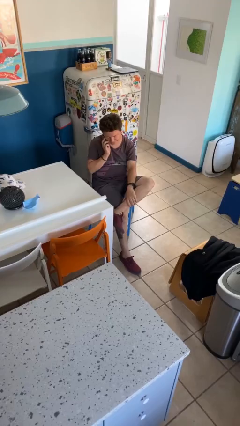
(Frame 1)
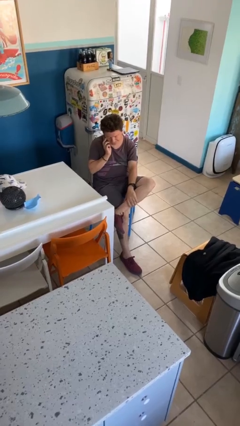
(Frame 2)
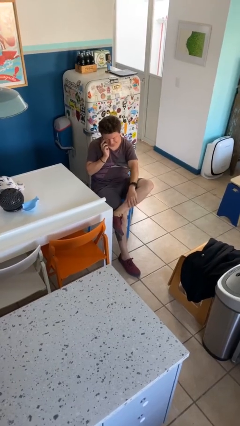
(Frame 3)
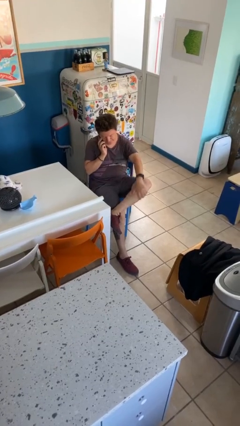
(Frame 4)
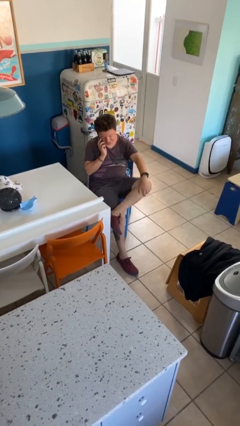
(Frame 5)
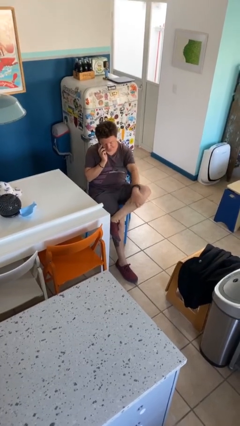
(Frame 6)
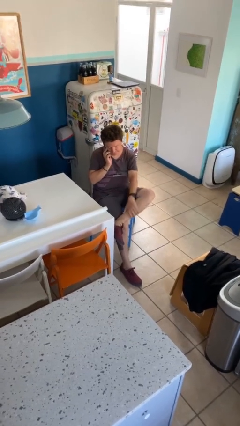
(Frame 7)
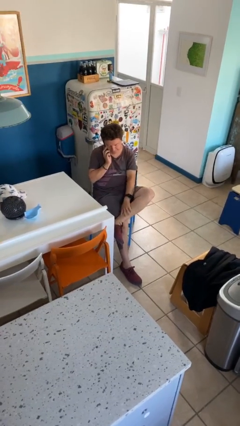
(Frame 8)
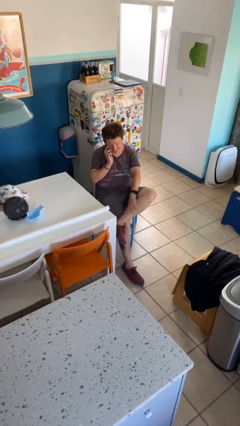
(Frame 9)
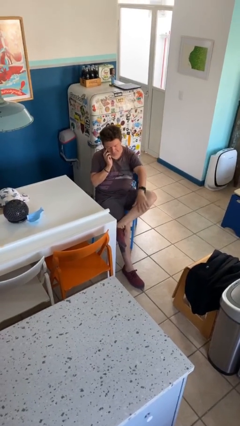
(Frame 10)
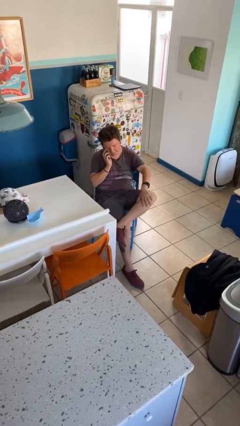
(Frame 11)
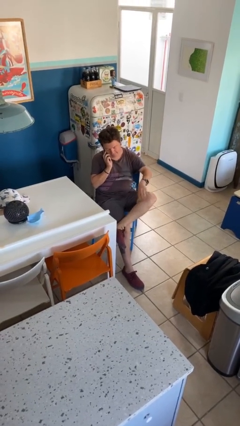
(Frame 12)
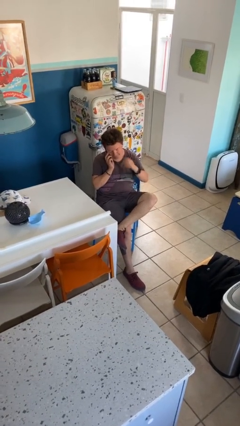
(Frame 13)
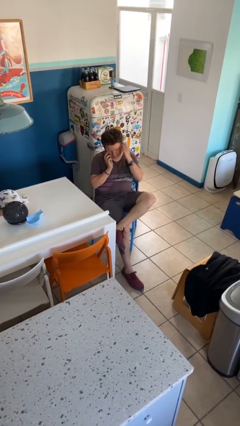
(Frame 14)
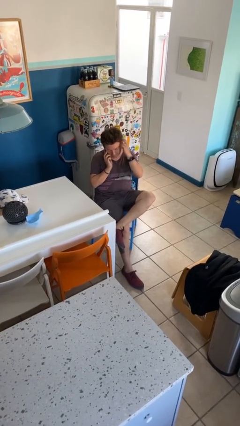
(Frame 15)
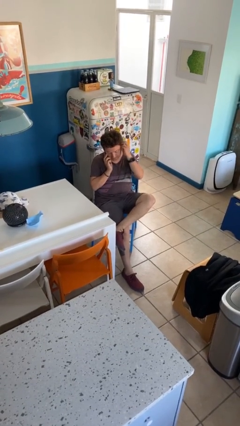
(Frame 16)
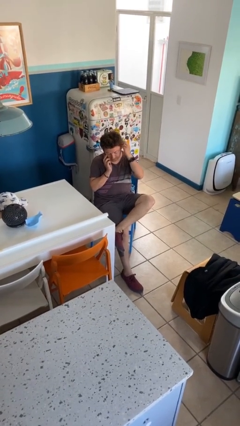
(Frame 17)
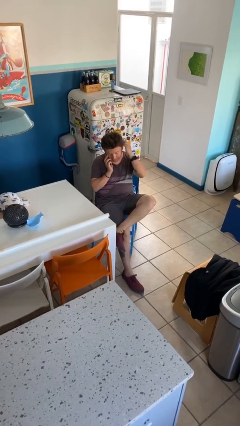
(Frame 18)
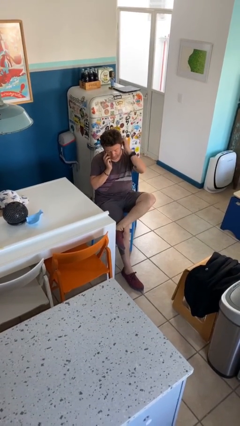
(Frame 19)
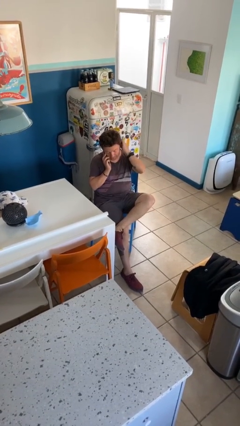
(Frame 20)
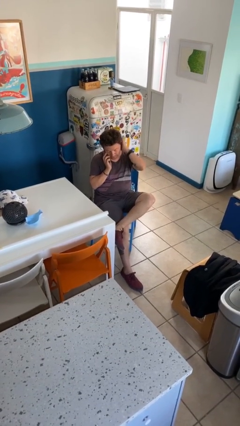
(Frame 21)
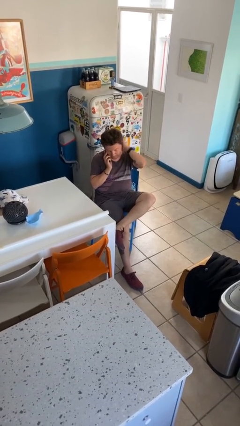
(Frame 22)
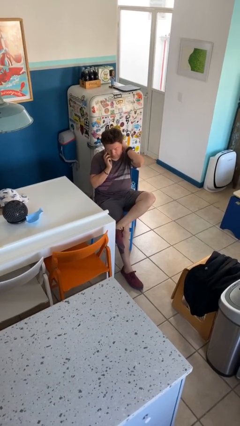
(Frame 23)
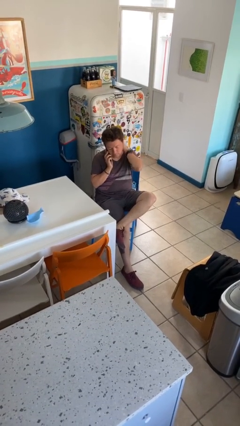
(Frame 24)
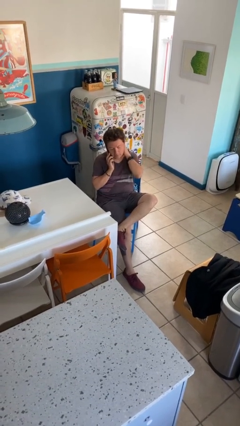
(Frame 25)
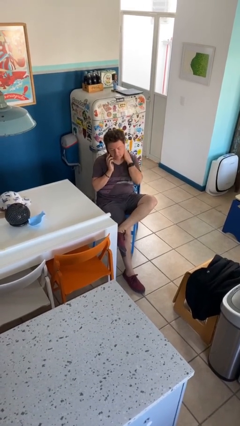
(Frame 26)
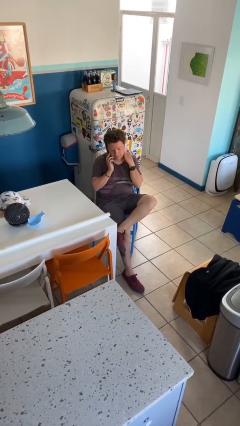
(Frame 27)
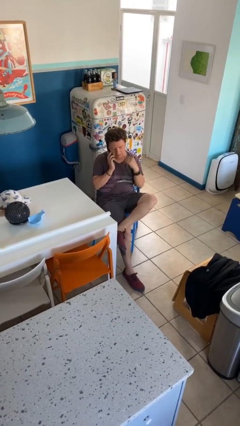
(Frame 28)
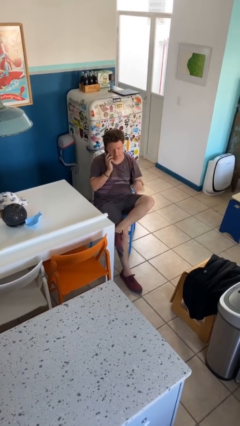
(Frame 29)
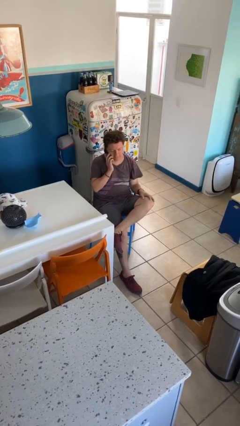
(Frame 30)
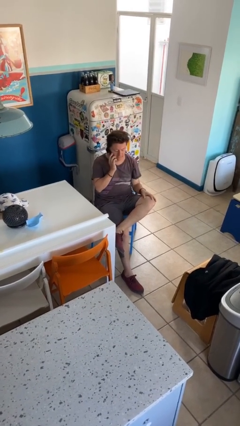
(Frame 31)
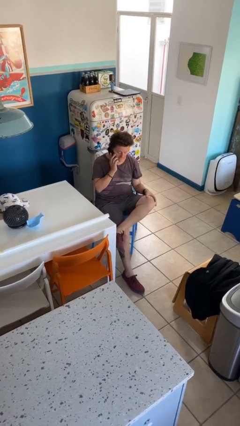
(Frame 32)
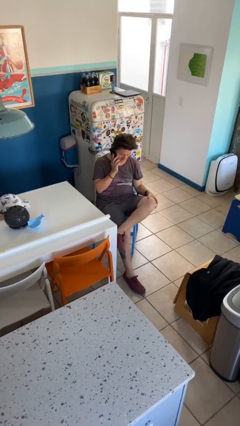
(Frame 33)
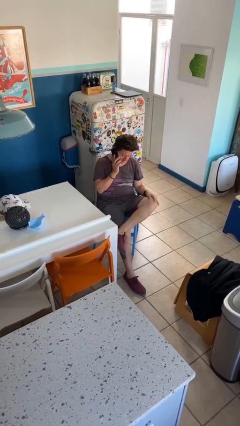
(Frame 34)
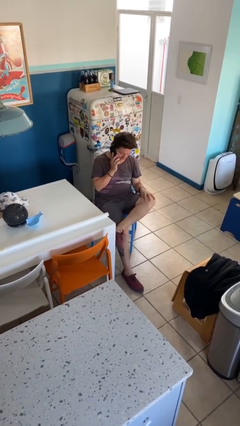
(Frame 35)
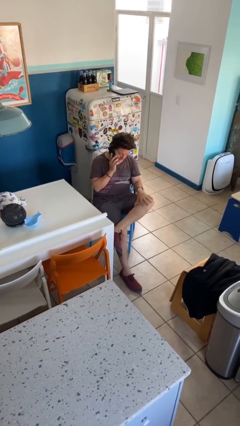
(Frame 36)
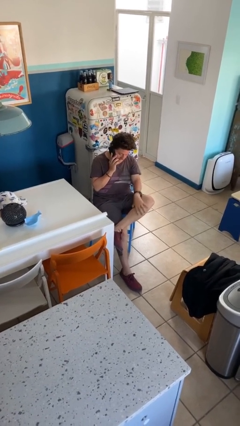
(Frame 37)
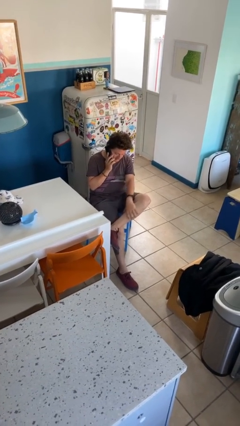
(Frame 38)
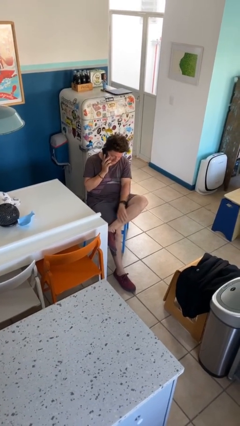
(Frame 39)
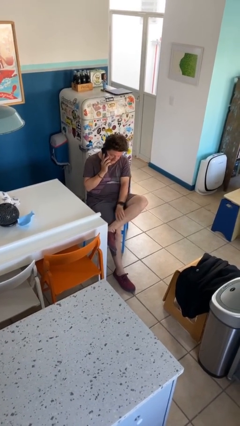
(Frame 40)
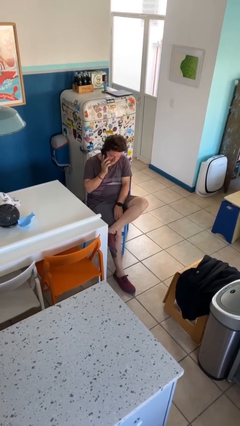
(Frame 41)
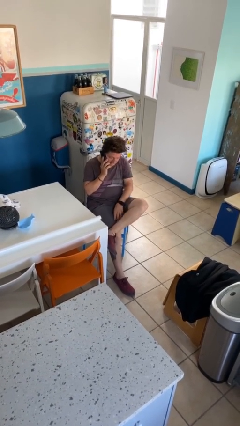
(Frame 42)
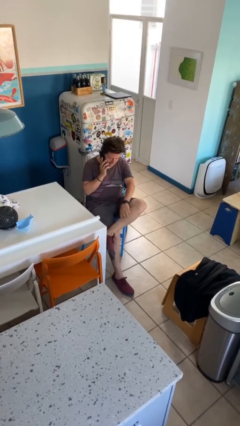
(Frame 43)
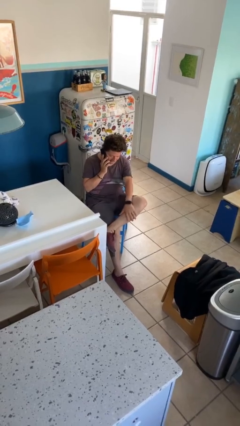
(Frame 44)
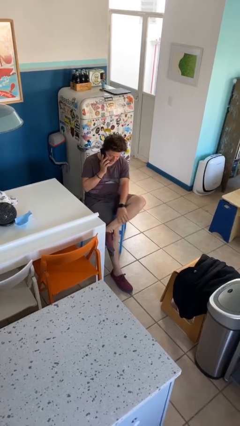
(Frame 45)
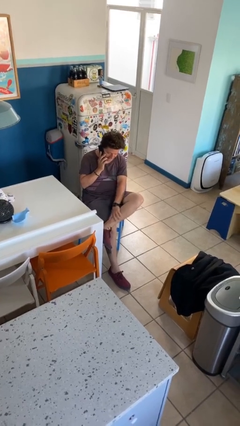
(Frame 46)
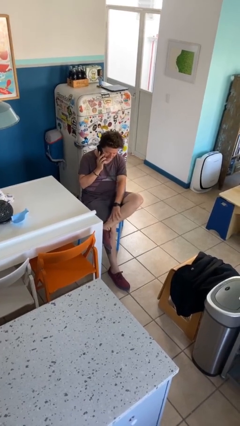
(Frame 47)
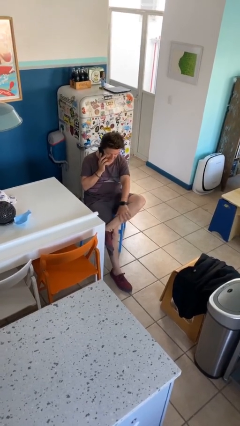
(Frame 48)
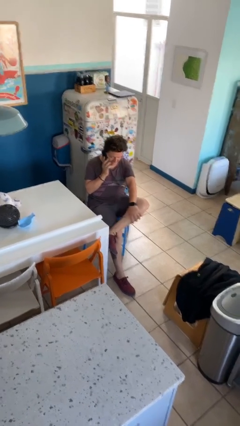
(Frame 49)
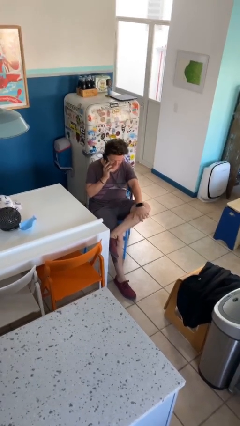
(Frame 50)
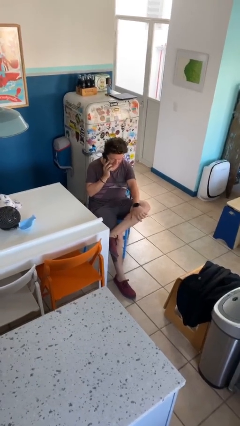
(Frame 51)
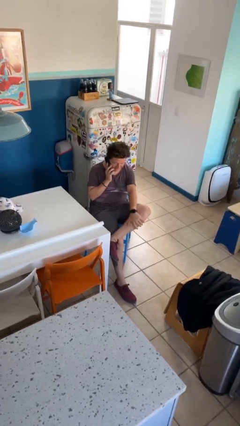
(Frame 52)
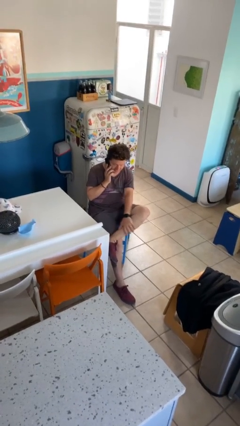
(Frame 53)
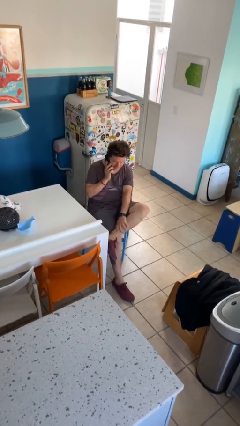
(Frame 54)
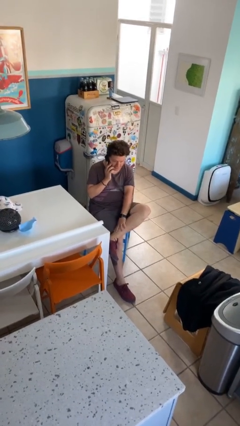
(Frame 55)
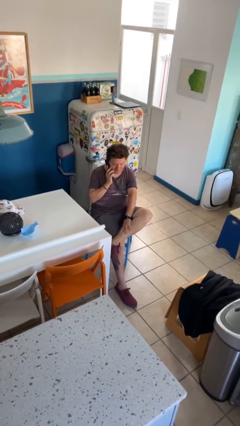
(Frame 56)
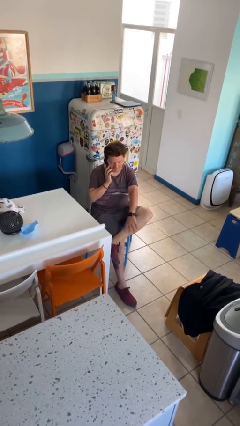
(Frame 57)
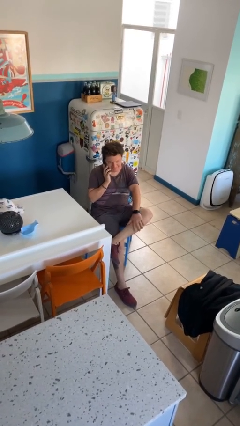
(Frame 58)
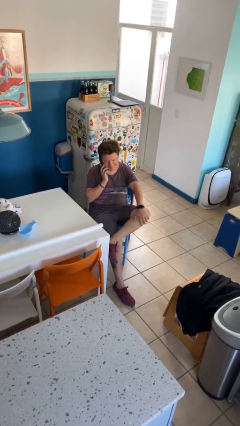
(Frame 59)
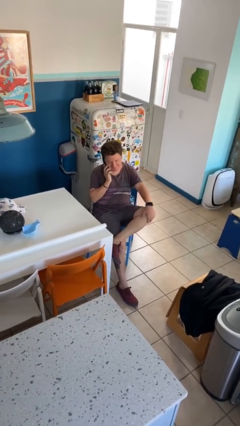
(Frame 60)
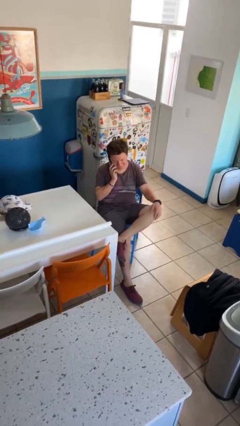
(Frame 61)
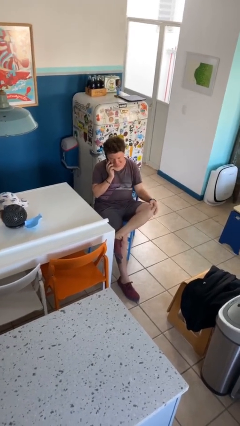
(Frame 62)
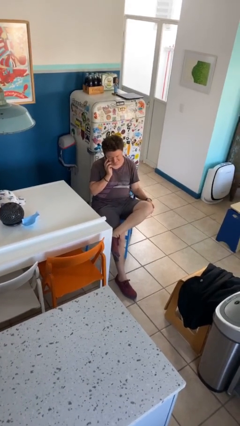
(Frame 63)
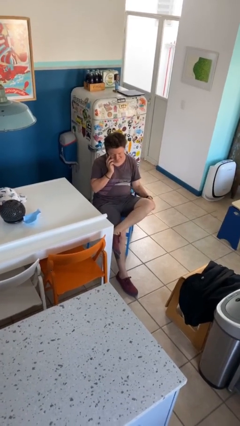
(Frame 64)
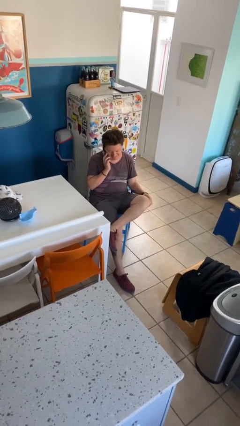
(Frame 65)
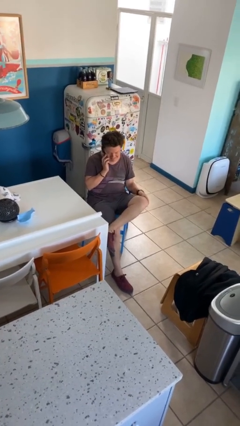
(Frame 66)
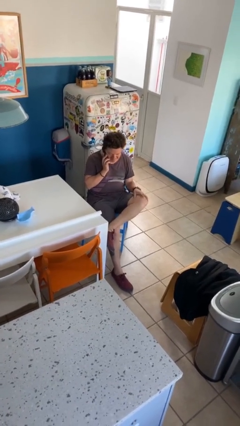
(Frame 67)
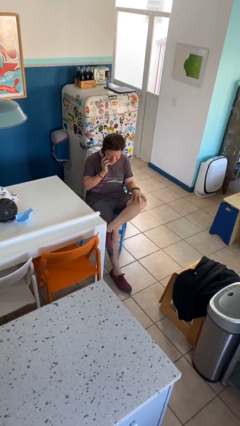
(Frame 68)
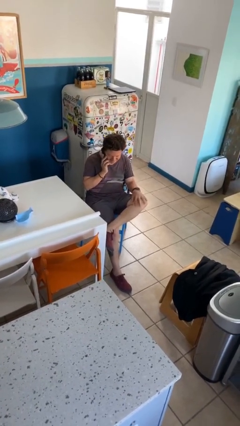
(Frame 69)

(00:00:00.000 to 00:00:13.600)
person talks on phone

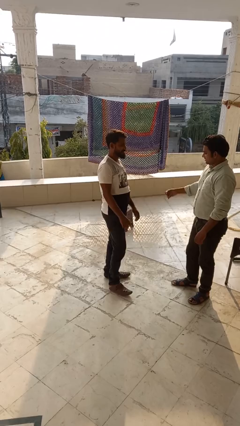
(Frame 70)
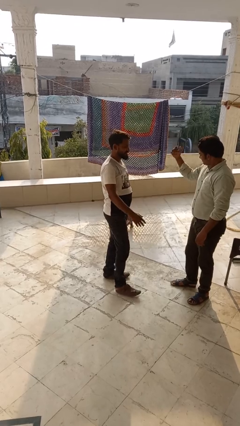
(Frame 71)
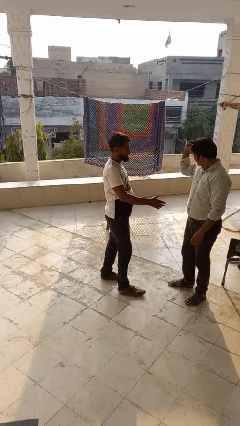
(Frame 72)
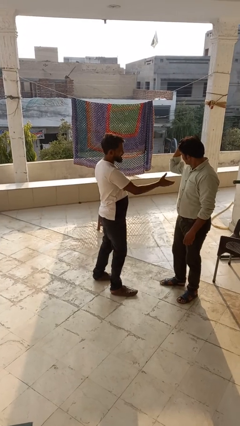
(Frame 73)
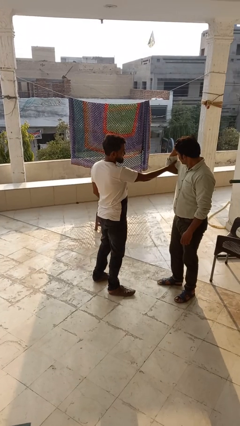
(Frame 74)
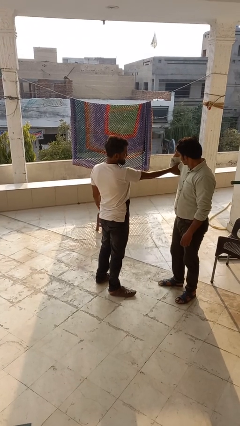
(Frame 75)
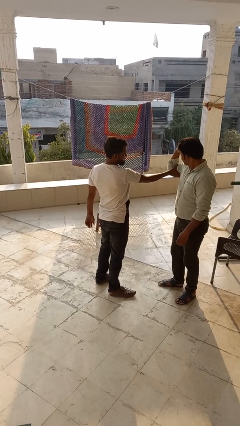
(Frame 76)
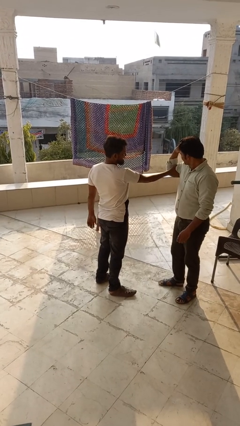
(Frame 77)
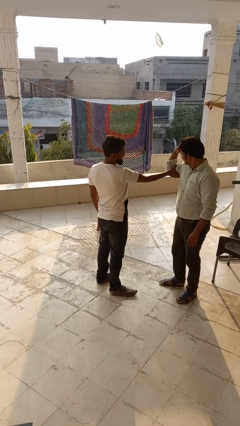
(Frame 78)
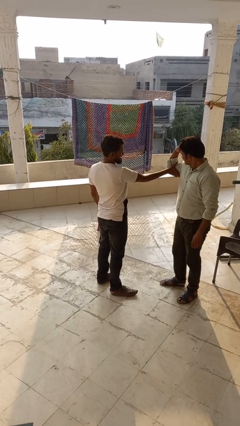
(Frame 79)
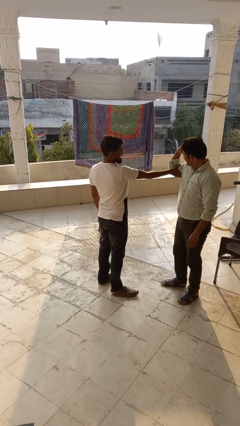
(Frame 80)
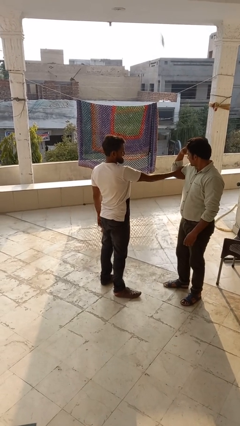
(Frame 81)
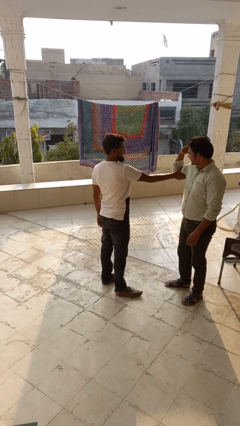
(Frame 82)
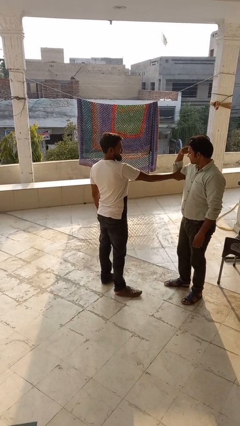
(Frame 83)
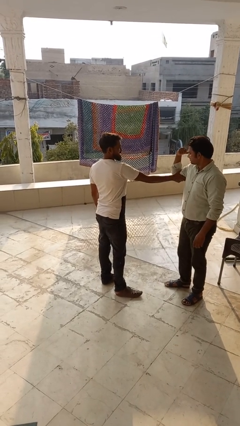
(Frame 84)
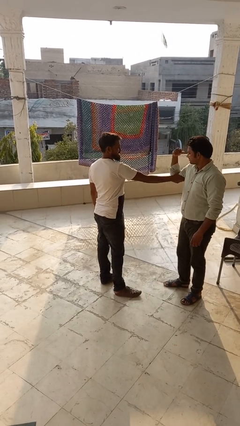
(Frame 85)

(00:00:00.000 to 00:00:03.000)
person grabs person by bicep

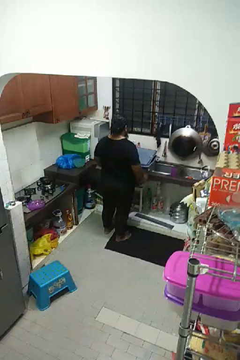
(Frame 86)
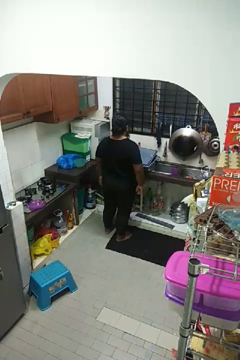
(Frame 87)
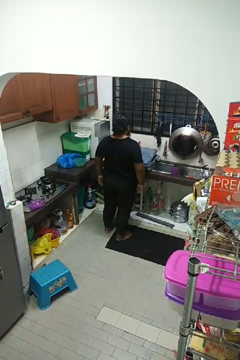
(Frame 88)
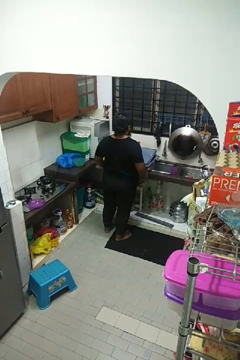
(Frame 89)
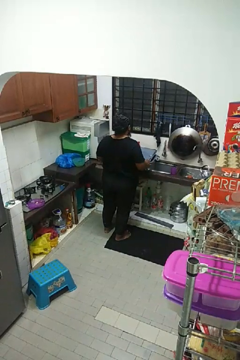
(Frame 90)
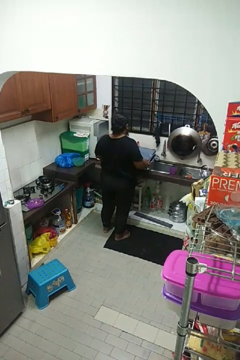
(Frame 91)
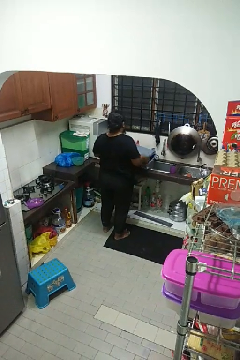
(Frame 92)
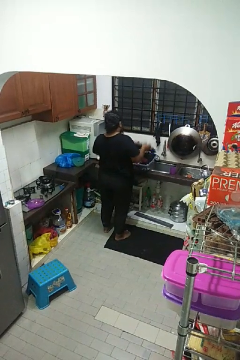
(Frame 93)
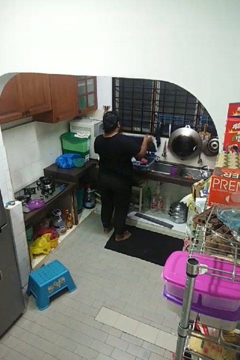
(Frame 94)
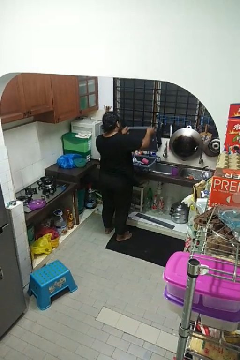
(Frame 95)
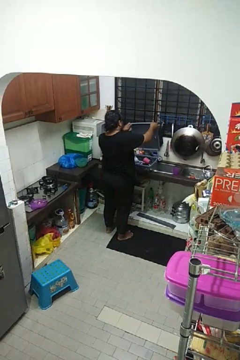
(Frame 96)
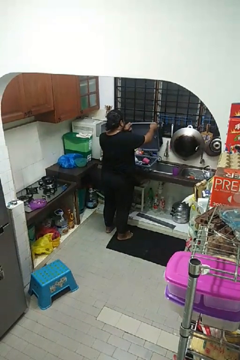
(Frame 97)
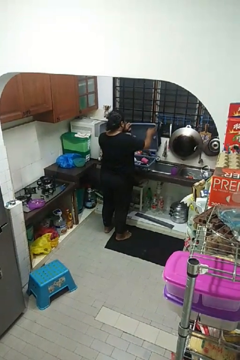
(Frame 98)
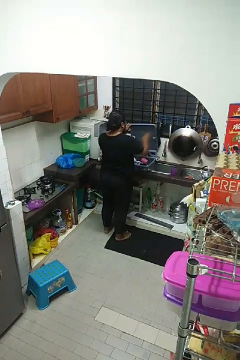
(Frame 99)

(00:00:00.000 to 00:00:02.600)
person opens dishwasher
